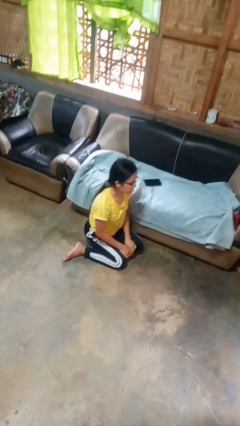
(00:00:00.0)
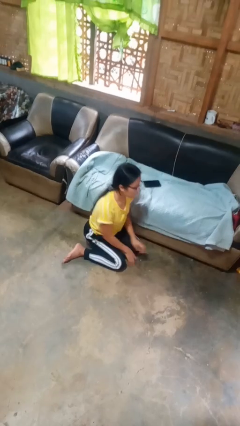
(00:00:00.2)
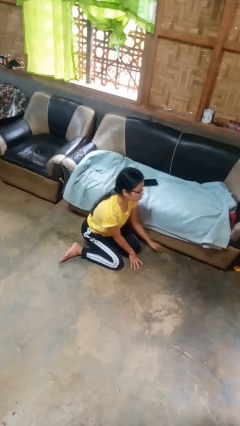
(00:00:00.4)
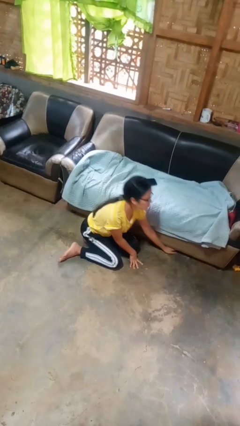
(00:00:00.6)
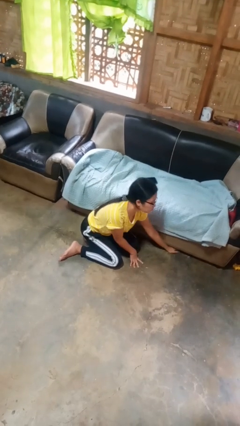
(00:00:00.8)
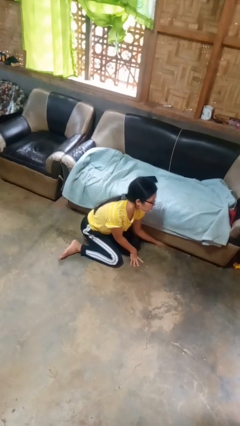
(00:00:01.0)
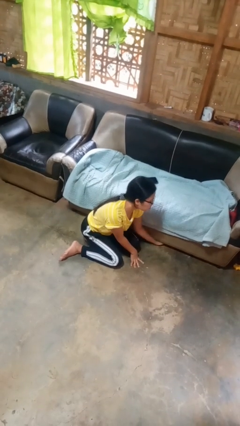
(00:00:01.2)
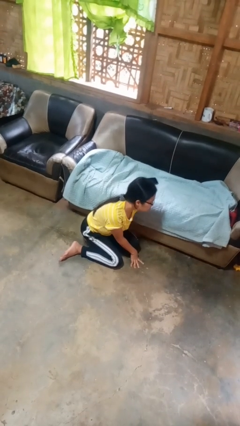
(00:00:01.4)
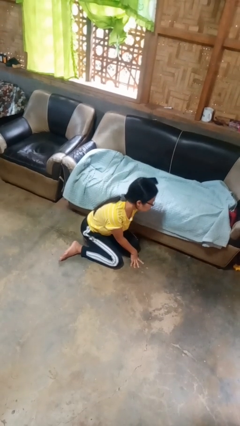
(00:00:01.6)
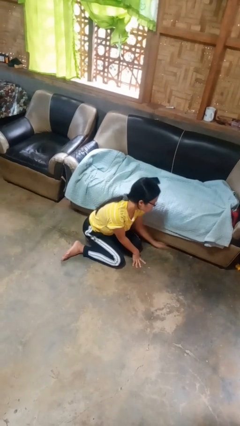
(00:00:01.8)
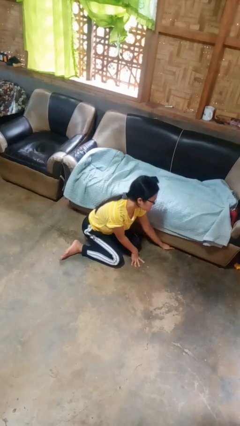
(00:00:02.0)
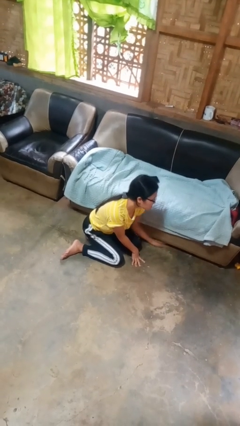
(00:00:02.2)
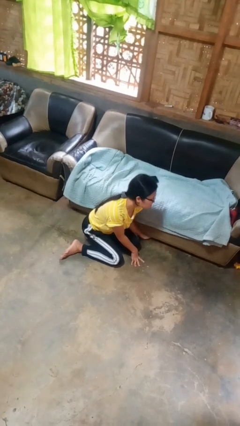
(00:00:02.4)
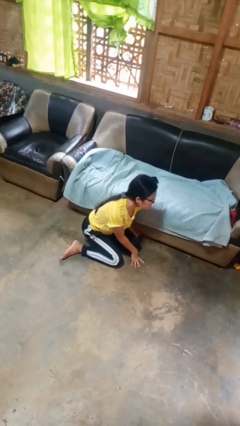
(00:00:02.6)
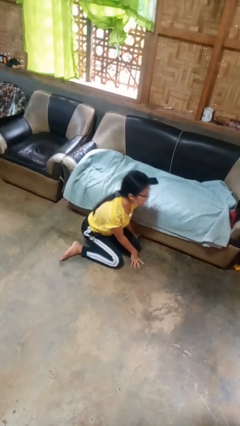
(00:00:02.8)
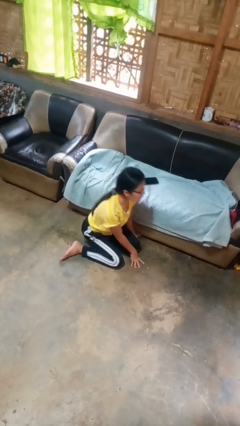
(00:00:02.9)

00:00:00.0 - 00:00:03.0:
person searches under couch

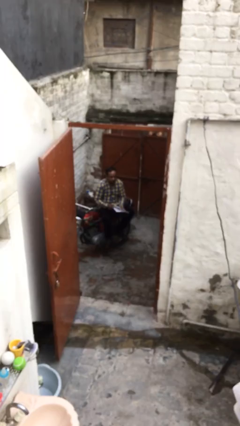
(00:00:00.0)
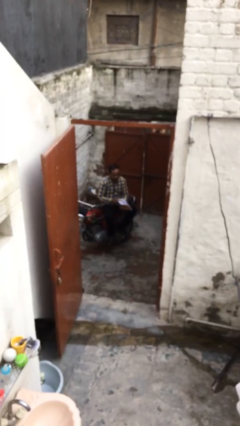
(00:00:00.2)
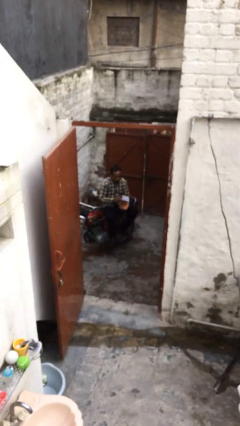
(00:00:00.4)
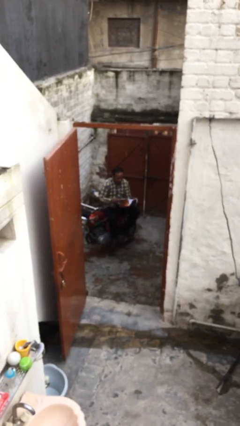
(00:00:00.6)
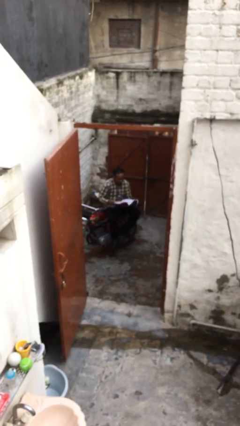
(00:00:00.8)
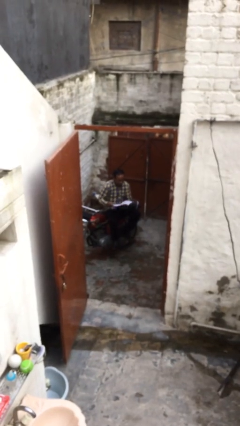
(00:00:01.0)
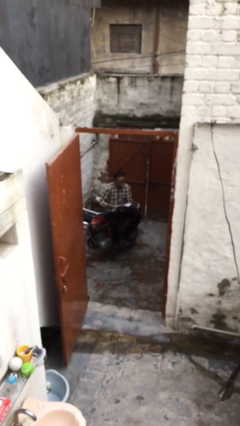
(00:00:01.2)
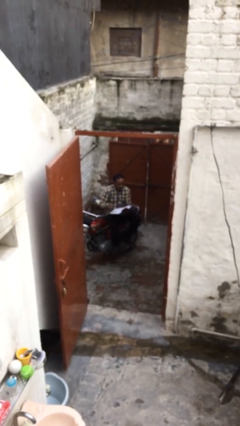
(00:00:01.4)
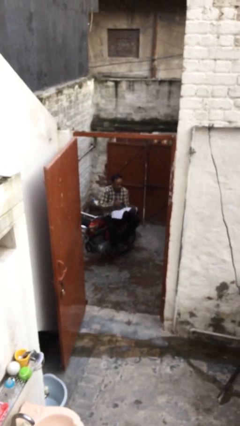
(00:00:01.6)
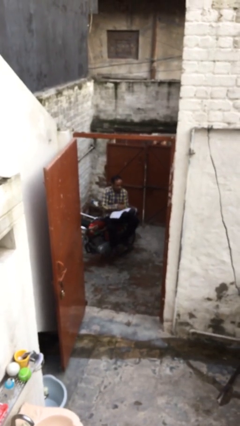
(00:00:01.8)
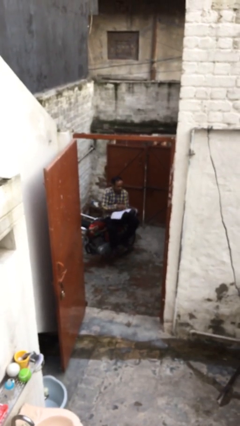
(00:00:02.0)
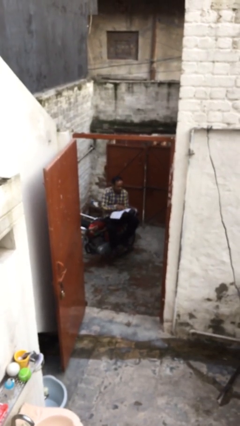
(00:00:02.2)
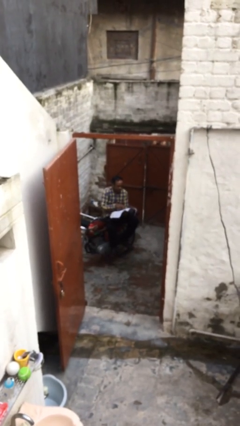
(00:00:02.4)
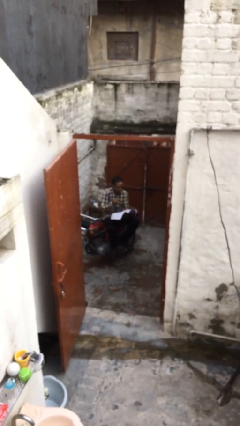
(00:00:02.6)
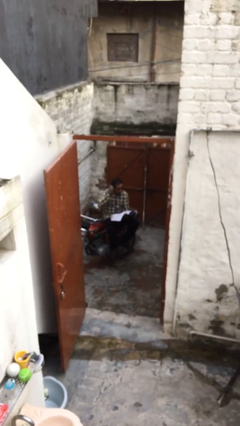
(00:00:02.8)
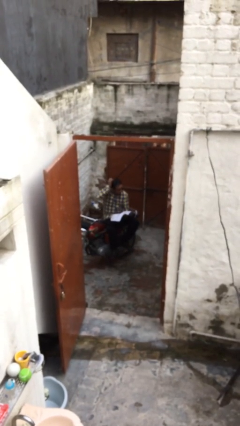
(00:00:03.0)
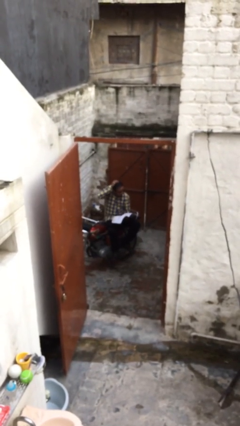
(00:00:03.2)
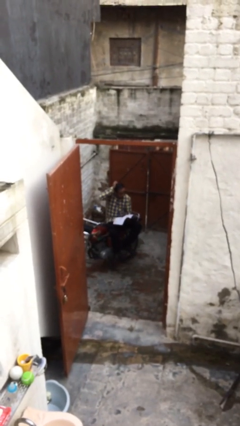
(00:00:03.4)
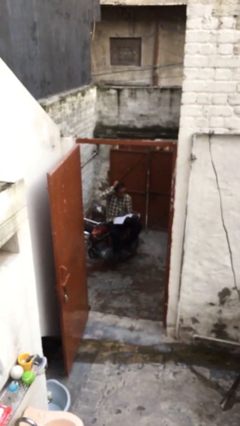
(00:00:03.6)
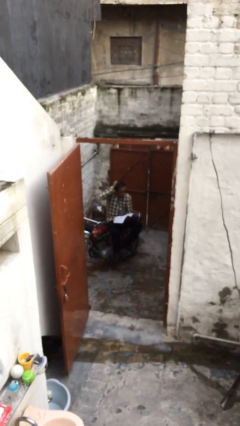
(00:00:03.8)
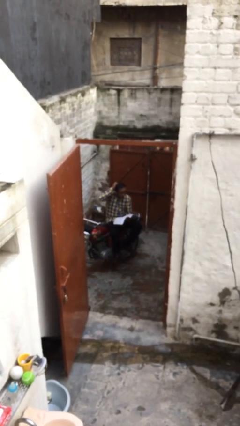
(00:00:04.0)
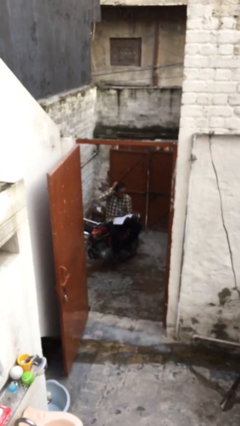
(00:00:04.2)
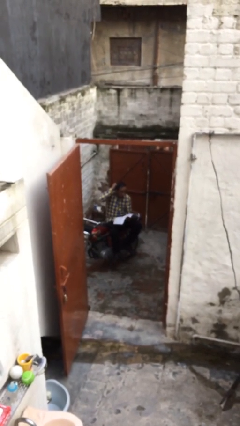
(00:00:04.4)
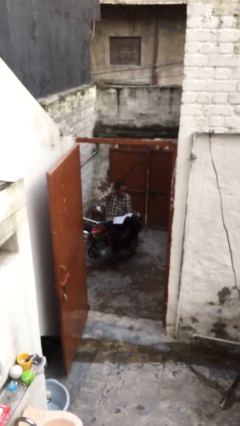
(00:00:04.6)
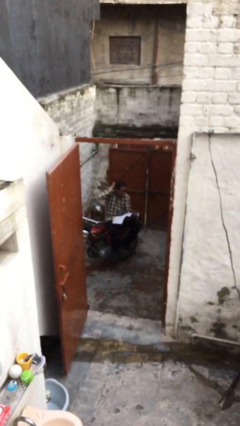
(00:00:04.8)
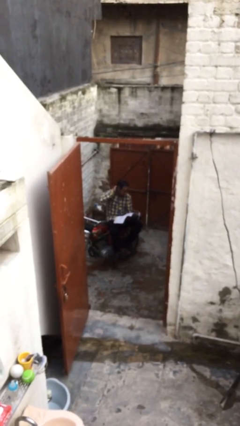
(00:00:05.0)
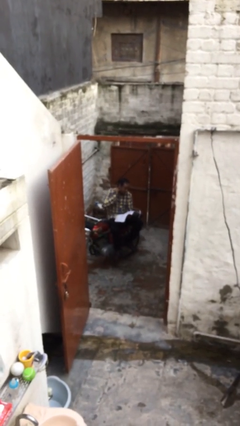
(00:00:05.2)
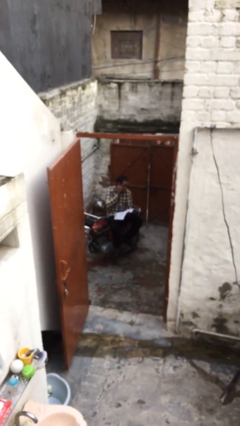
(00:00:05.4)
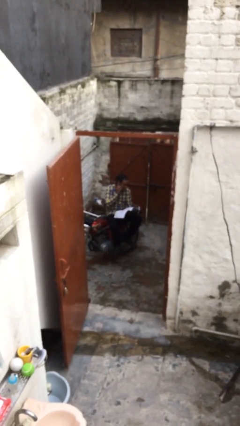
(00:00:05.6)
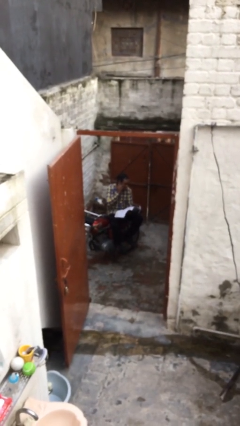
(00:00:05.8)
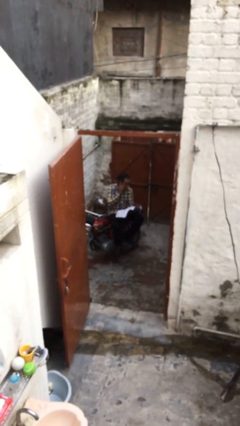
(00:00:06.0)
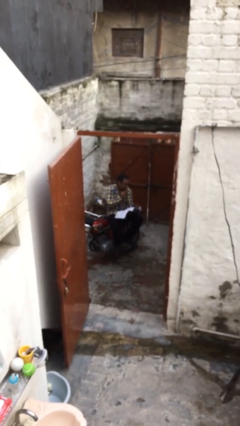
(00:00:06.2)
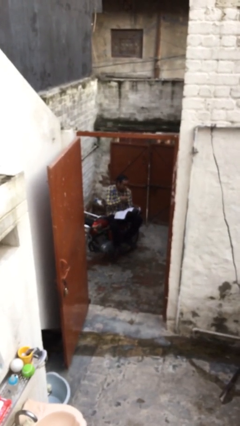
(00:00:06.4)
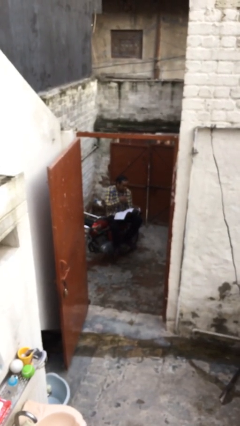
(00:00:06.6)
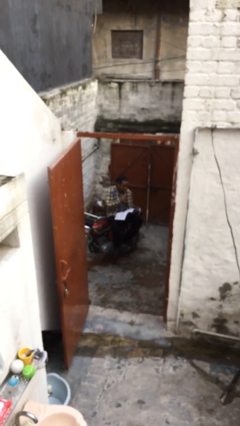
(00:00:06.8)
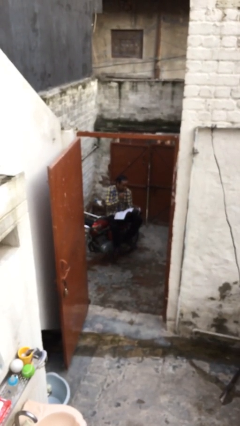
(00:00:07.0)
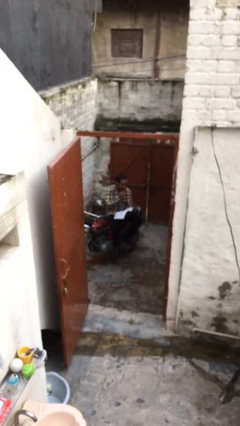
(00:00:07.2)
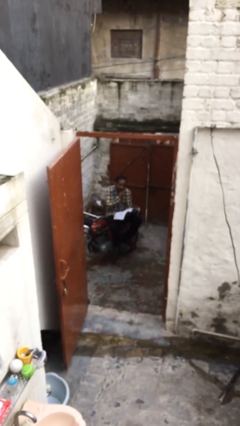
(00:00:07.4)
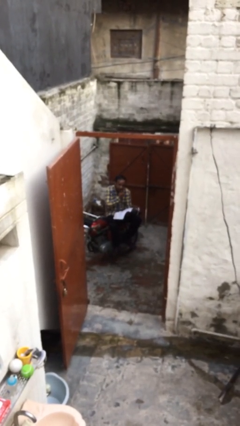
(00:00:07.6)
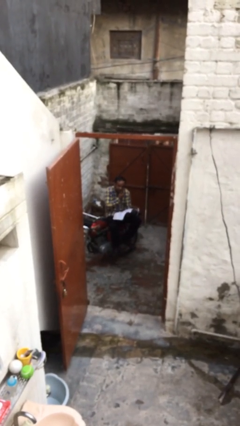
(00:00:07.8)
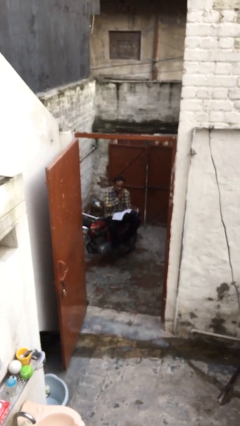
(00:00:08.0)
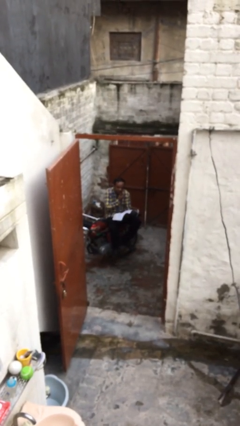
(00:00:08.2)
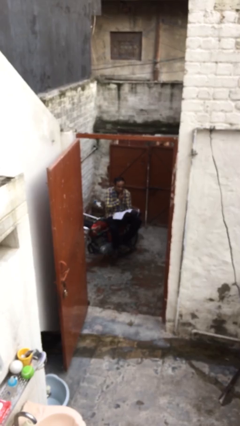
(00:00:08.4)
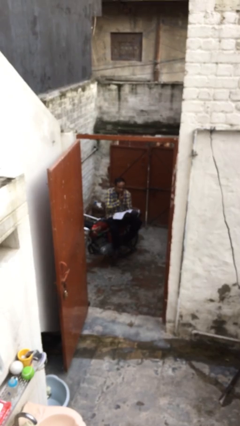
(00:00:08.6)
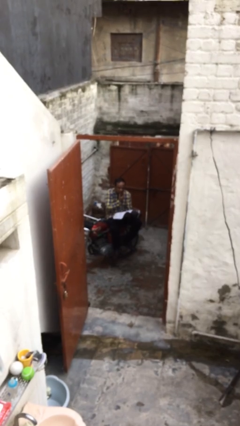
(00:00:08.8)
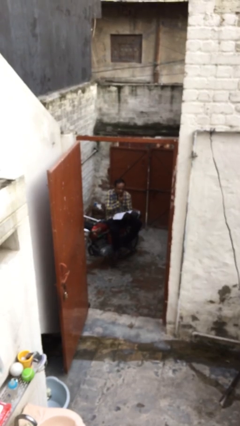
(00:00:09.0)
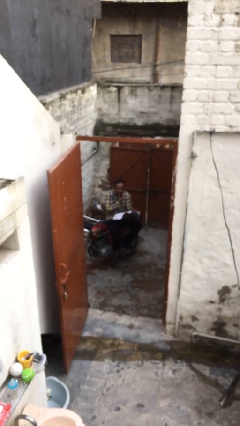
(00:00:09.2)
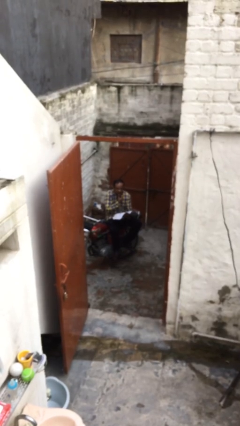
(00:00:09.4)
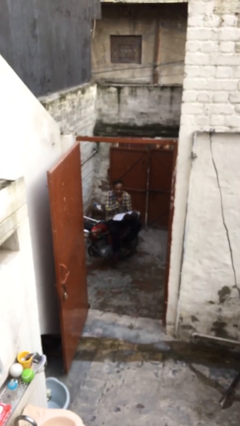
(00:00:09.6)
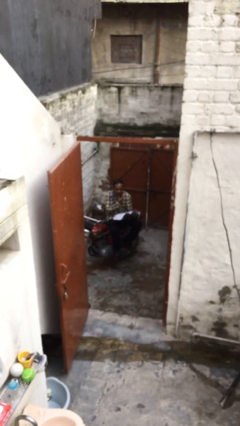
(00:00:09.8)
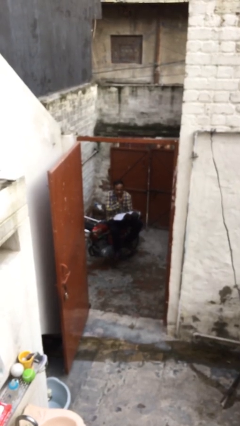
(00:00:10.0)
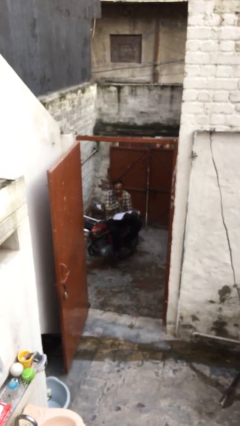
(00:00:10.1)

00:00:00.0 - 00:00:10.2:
person reads document

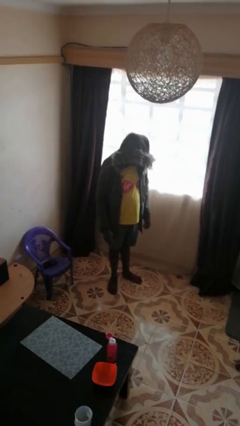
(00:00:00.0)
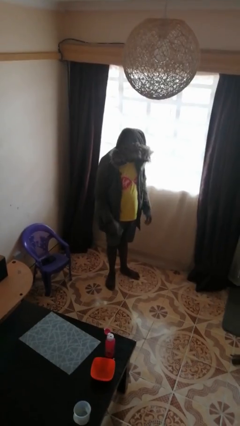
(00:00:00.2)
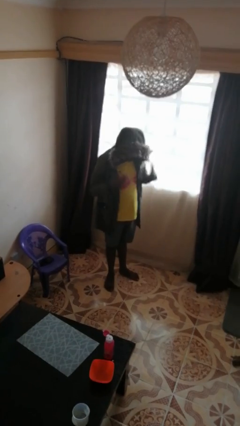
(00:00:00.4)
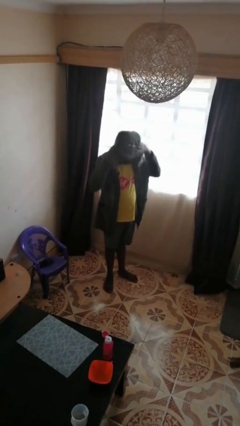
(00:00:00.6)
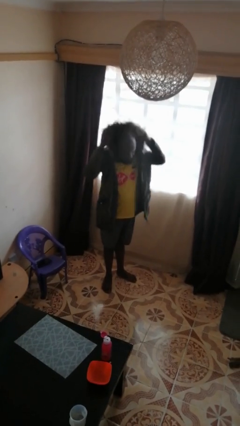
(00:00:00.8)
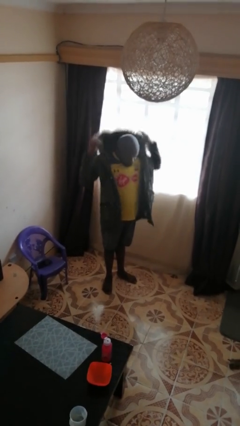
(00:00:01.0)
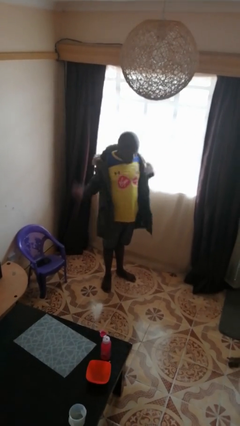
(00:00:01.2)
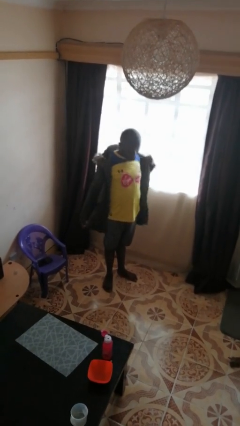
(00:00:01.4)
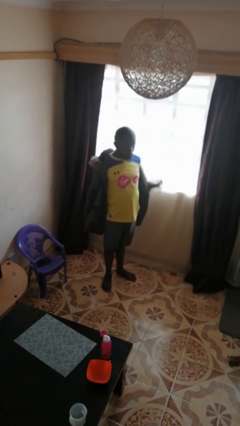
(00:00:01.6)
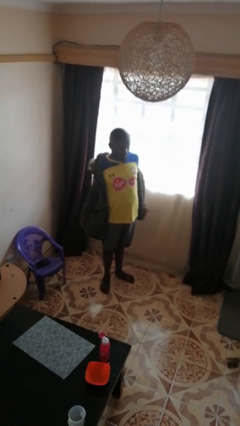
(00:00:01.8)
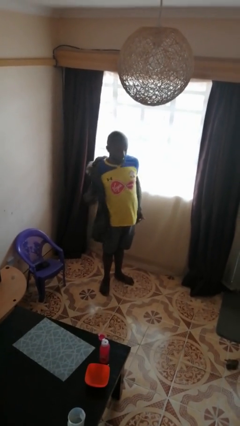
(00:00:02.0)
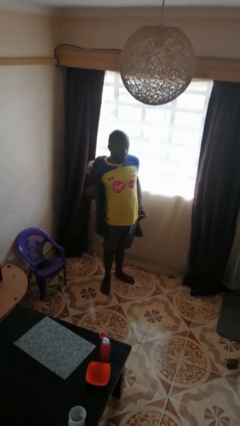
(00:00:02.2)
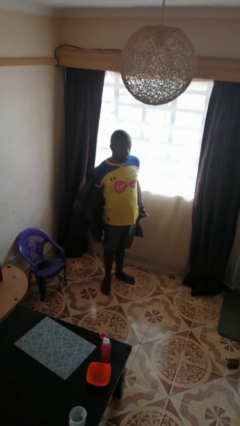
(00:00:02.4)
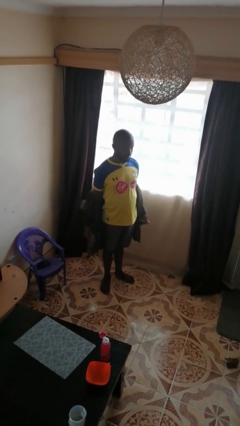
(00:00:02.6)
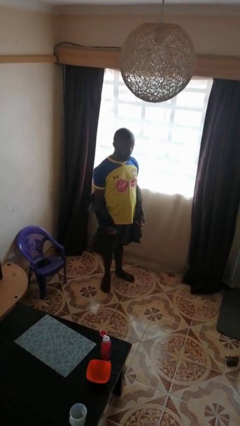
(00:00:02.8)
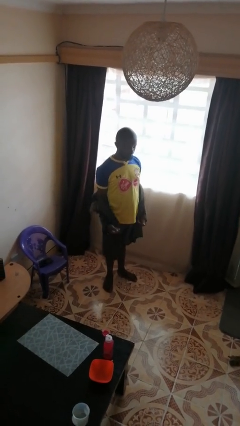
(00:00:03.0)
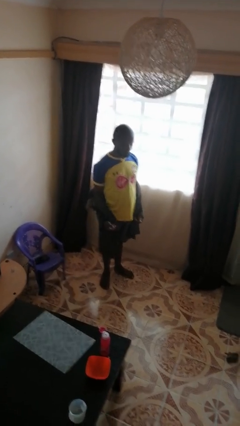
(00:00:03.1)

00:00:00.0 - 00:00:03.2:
person takes off hoodie

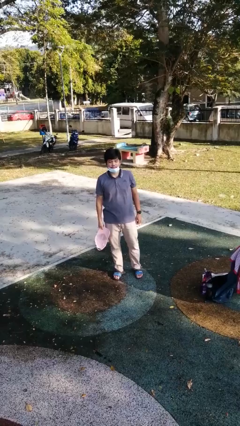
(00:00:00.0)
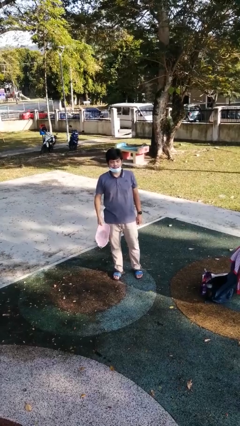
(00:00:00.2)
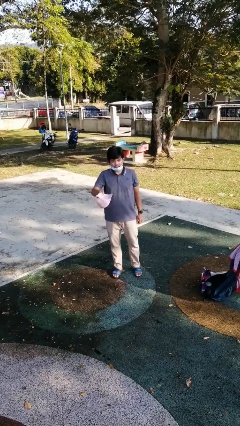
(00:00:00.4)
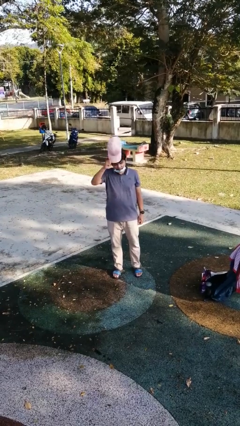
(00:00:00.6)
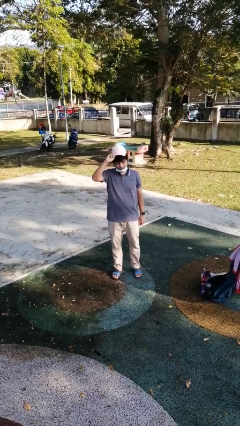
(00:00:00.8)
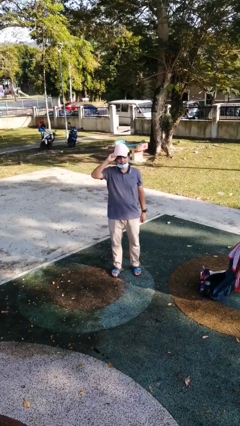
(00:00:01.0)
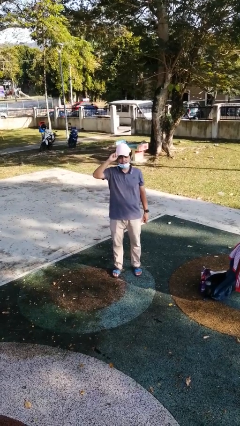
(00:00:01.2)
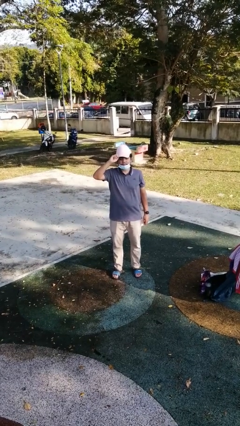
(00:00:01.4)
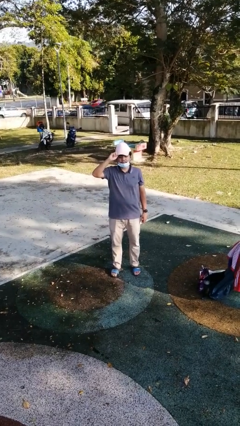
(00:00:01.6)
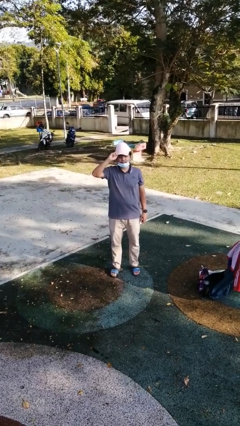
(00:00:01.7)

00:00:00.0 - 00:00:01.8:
person puts on hat
